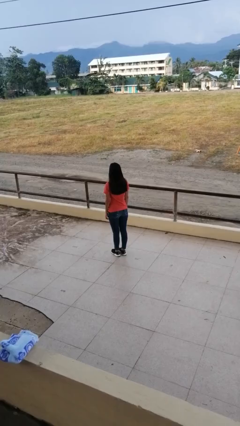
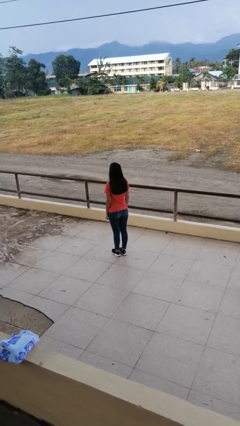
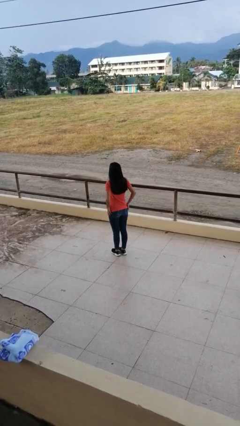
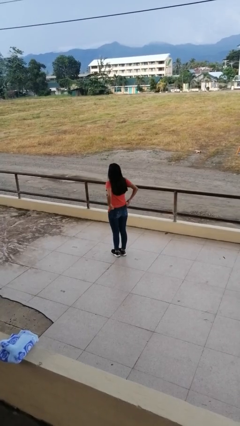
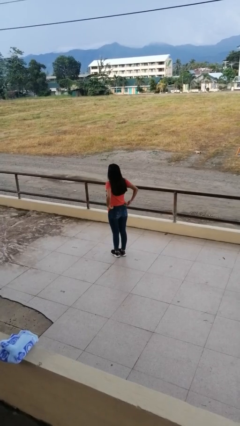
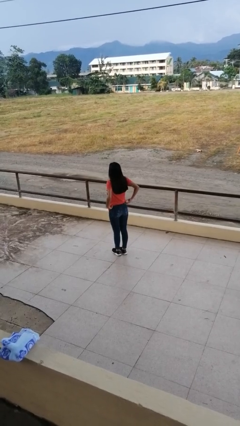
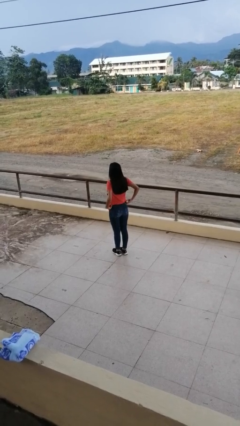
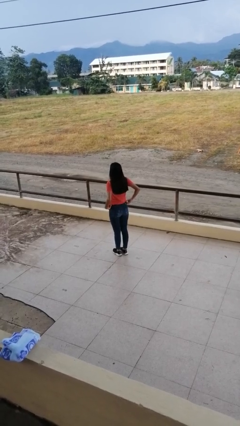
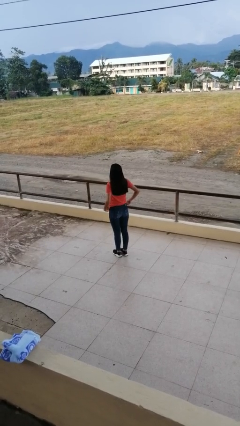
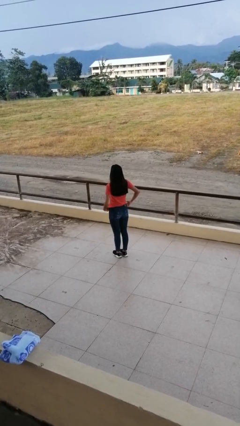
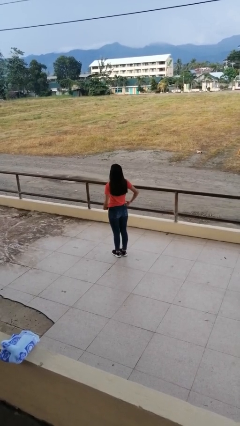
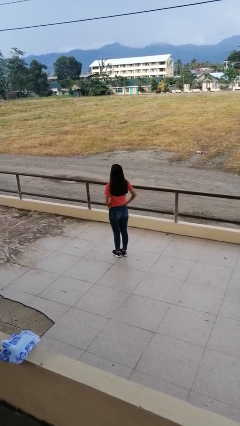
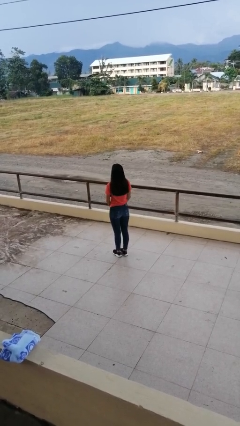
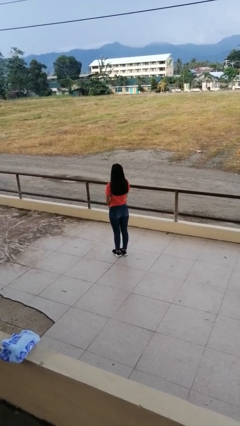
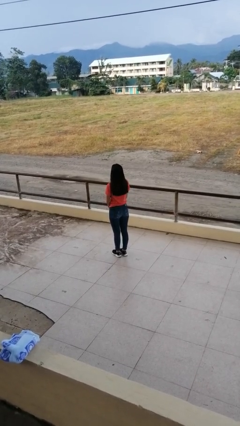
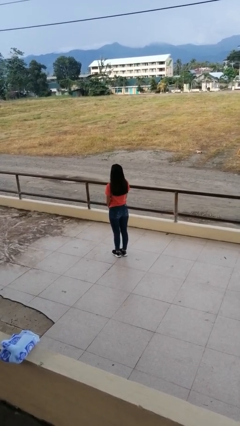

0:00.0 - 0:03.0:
person tucks in shirt

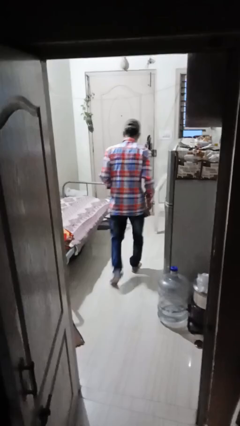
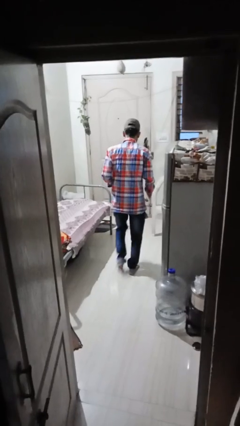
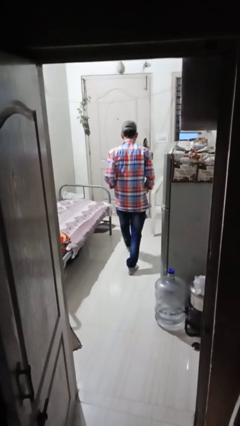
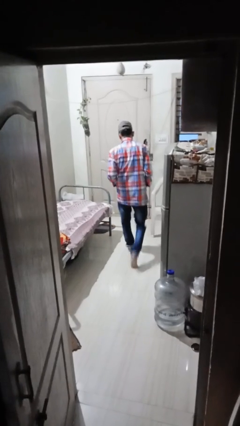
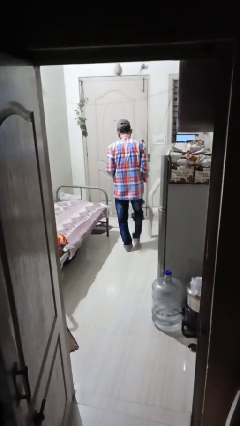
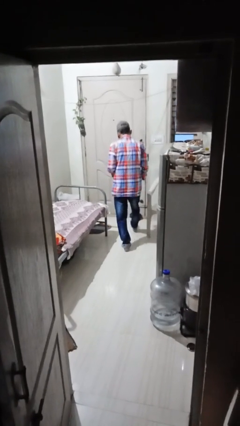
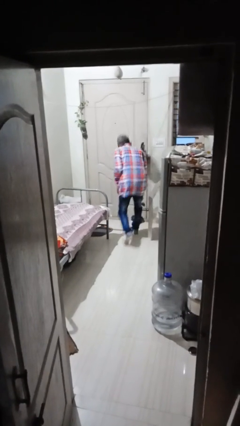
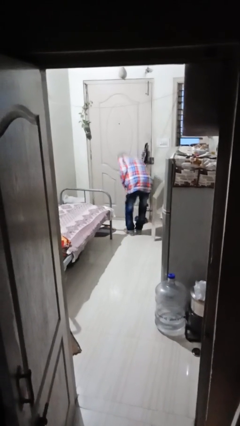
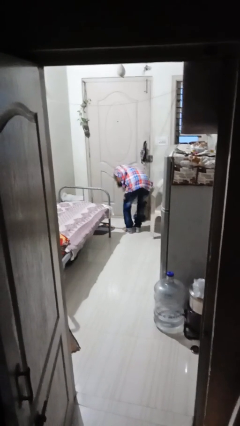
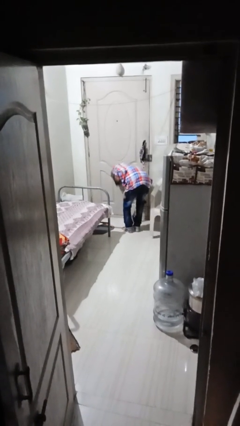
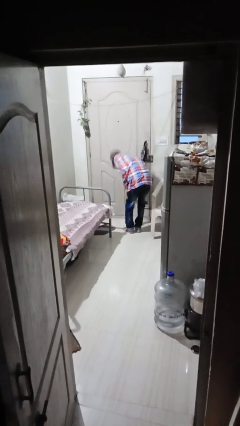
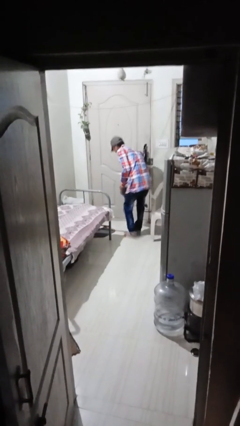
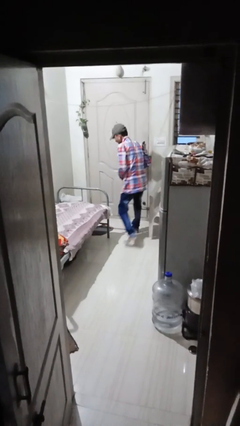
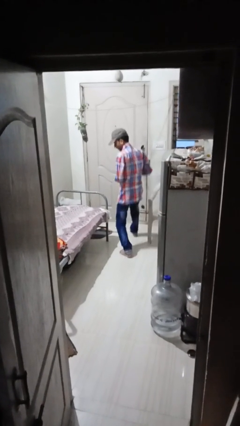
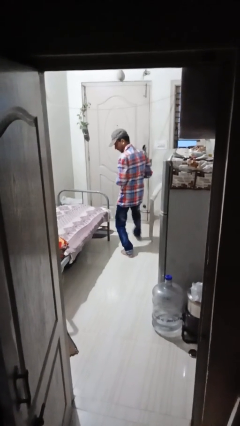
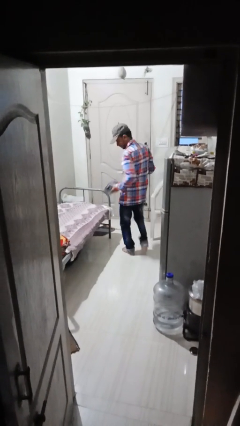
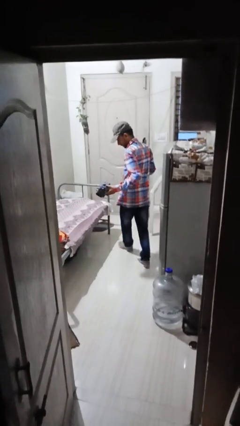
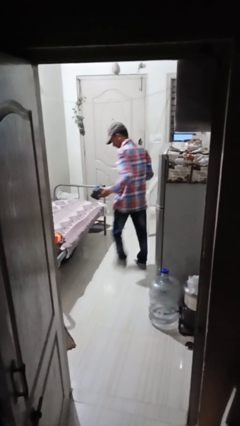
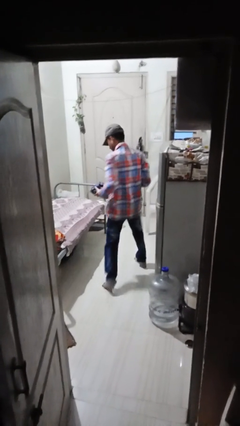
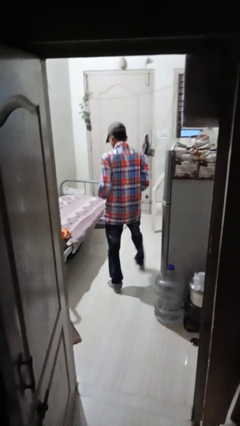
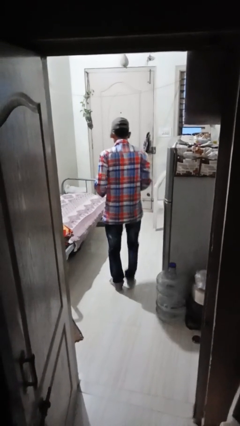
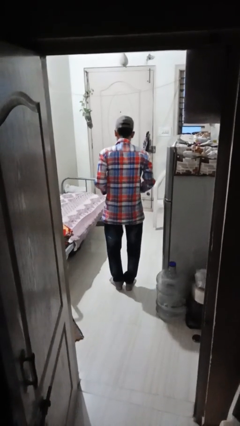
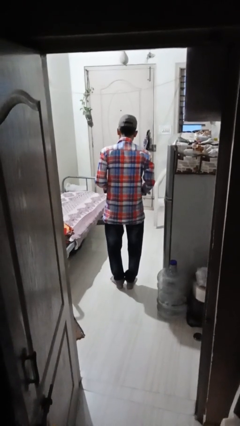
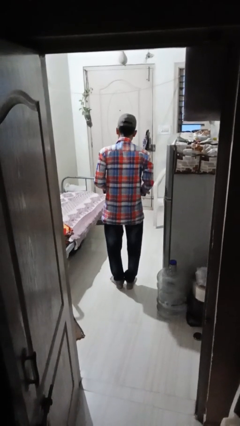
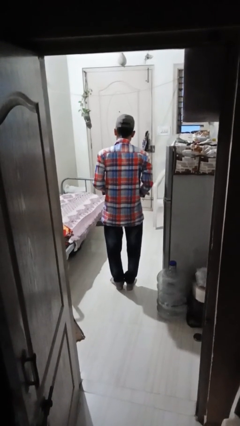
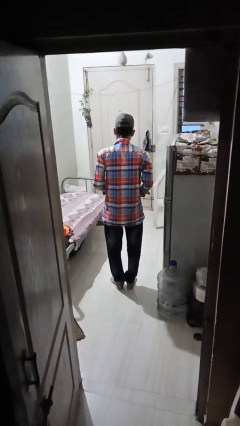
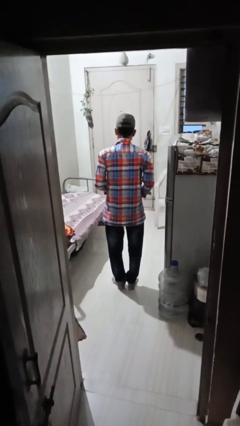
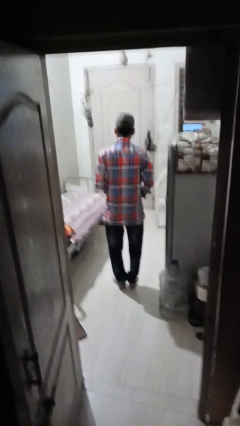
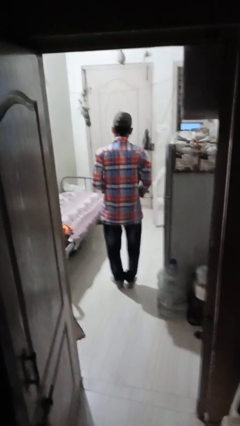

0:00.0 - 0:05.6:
person picks up object from floor

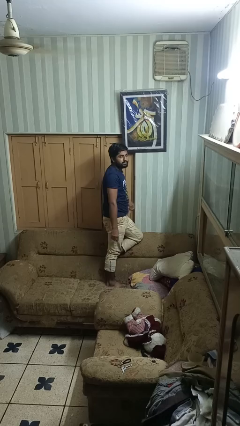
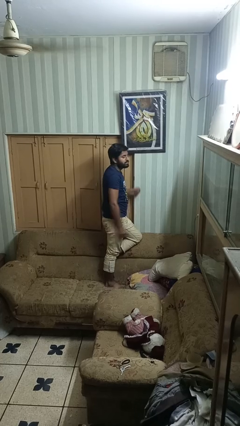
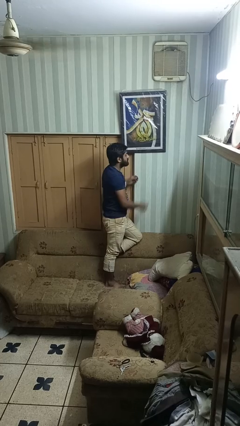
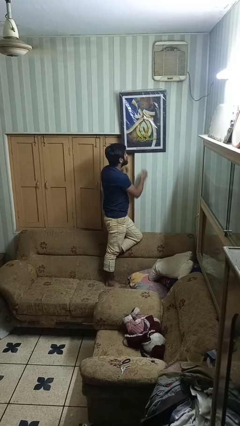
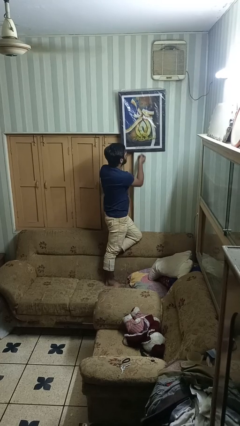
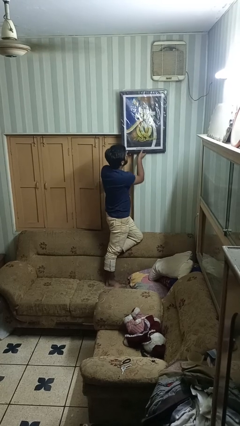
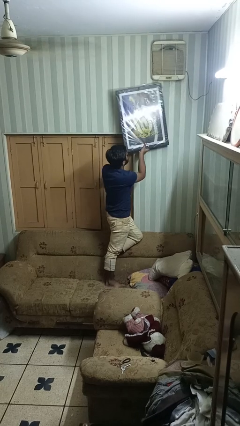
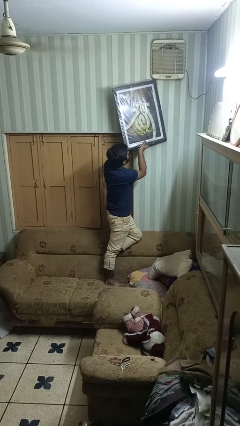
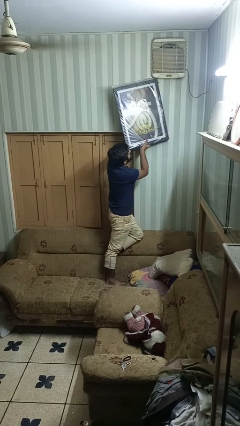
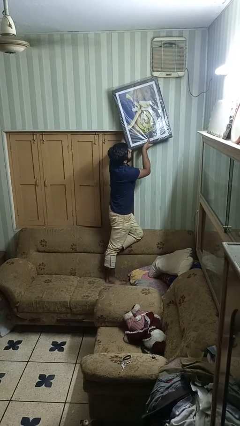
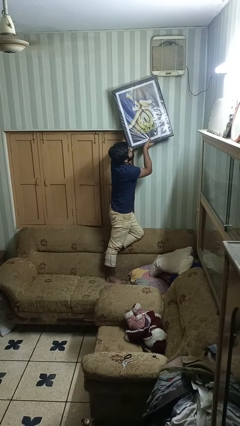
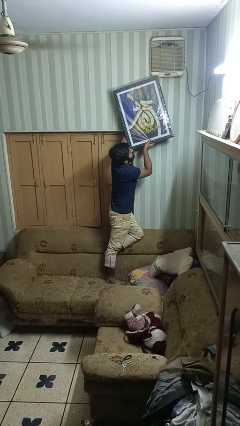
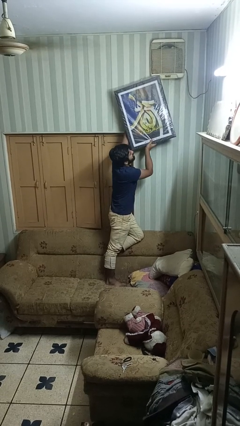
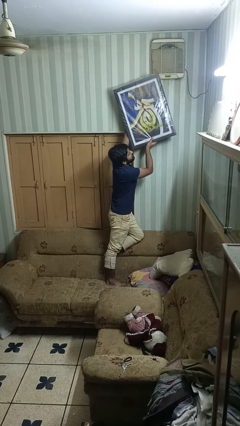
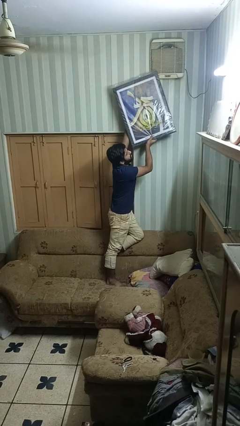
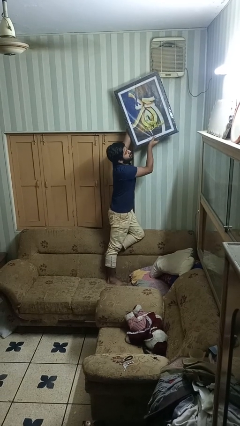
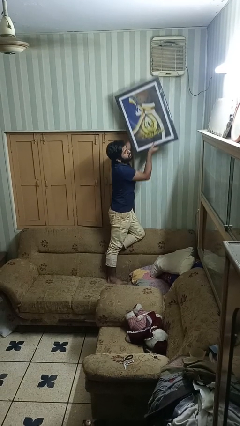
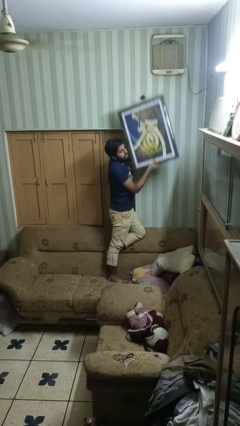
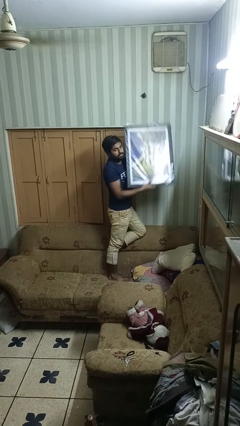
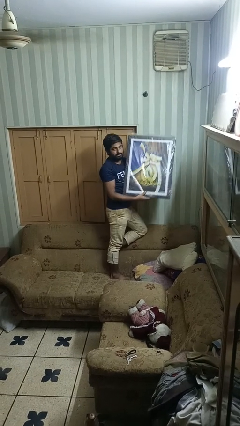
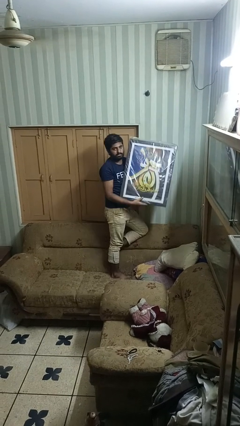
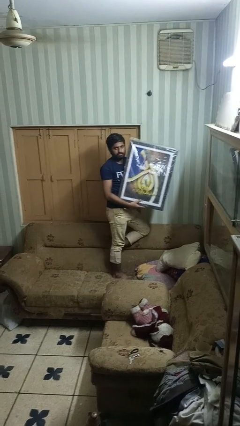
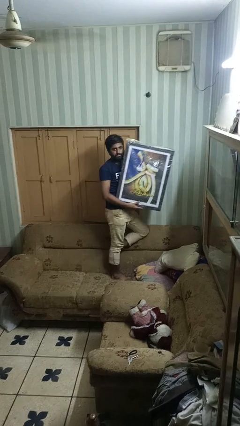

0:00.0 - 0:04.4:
person takes down picture frame

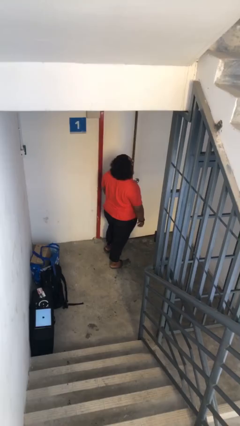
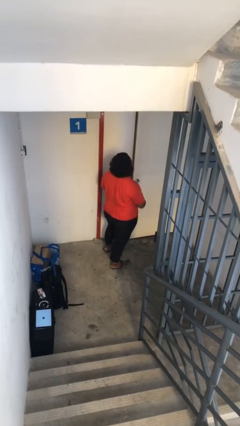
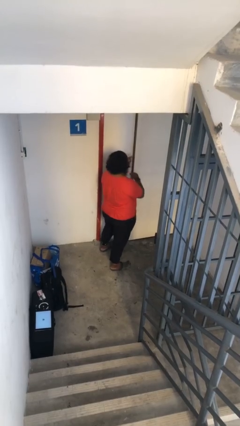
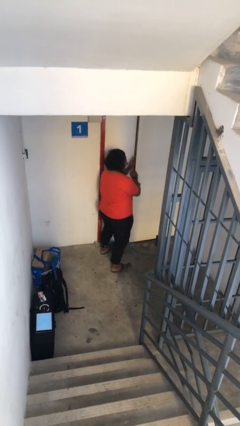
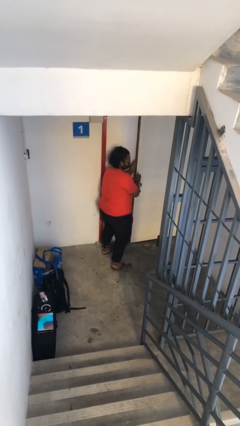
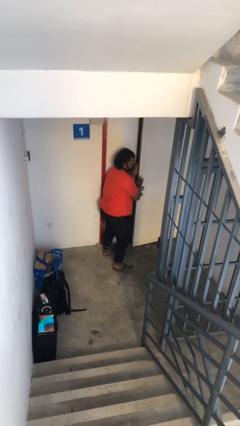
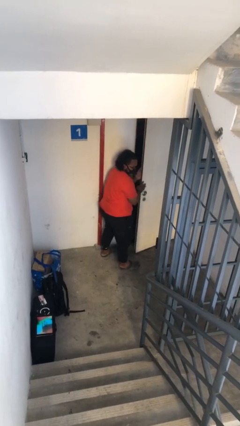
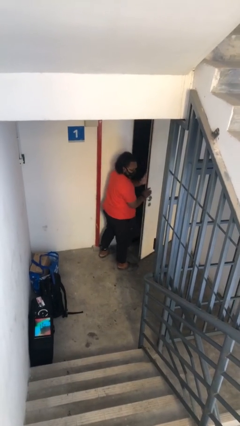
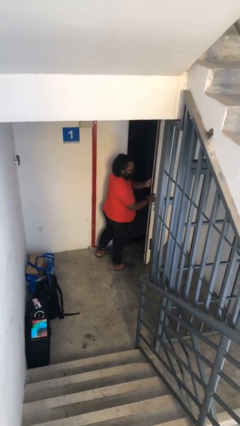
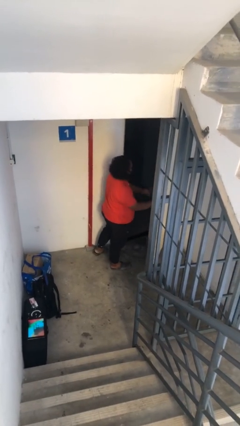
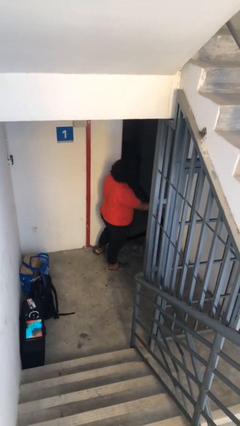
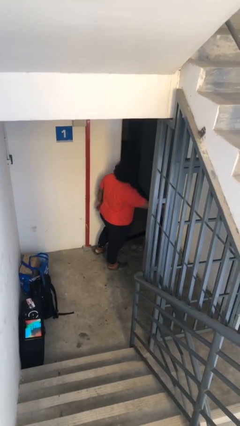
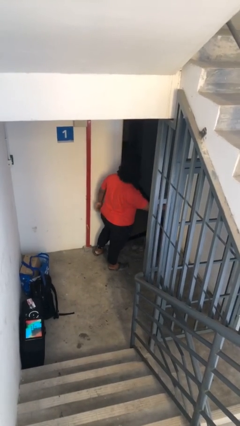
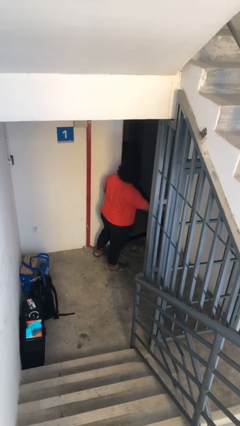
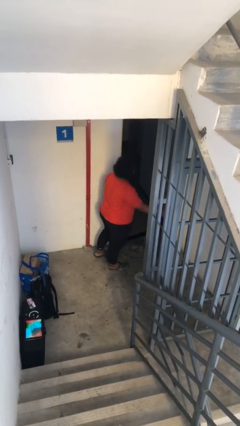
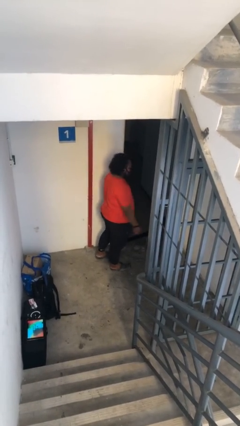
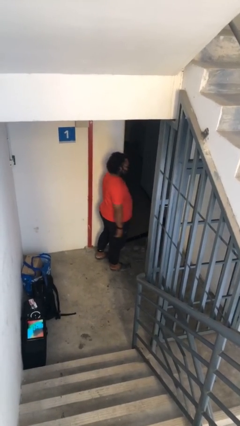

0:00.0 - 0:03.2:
person opens facility door

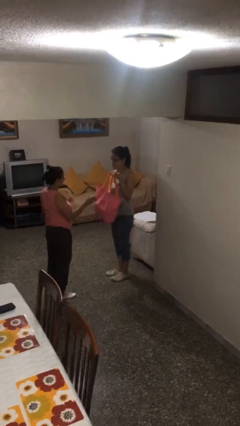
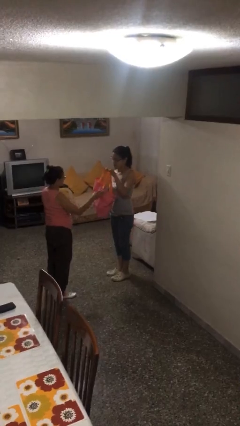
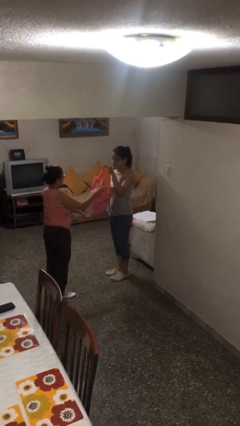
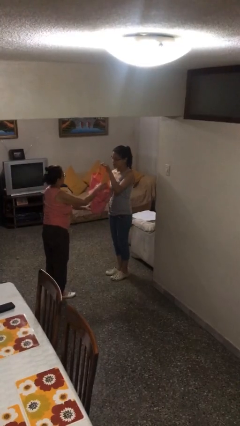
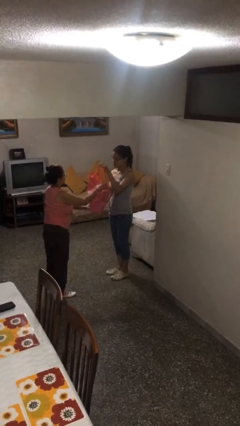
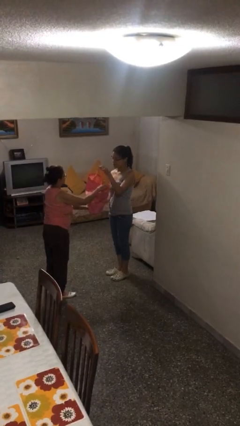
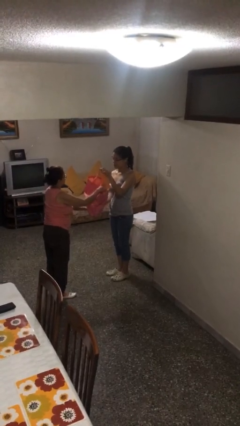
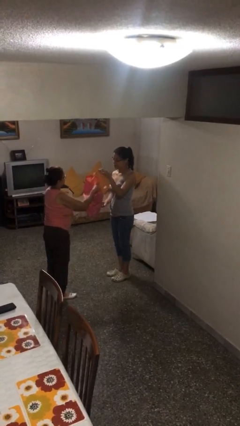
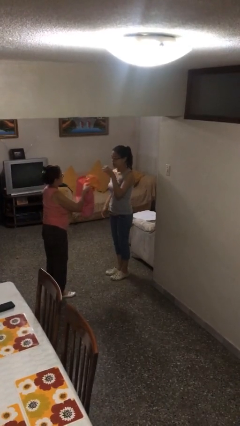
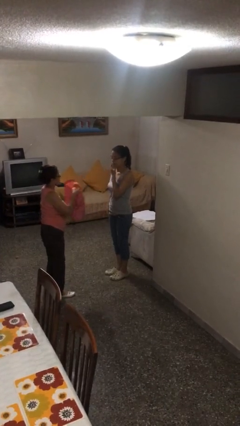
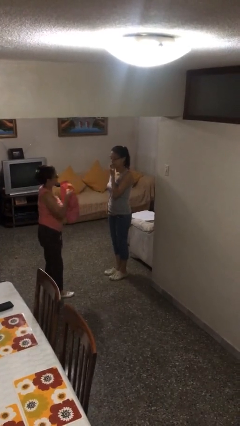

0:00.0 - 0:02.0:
person transfers object to person
